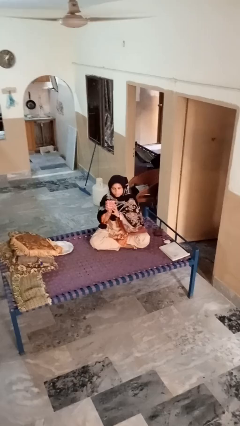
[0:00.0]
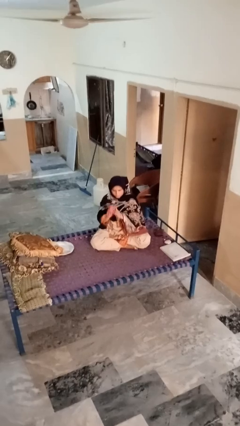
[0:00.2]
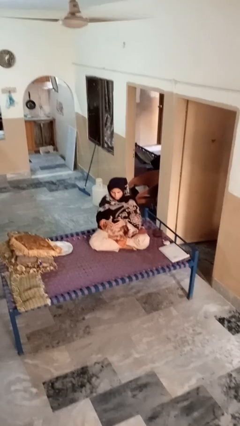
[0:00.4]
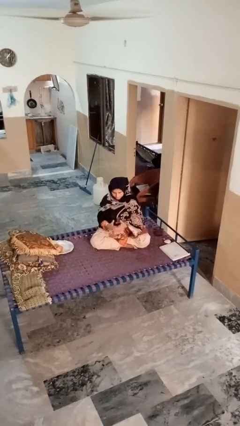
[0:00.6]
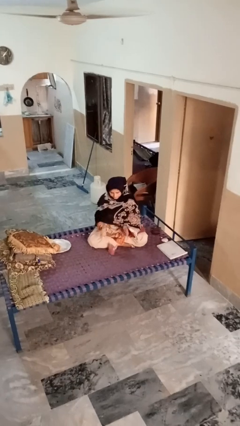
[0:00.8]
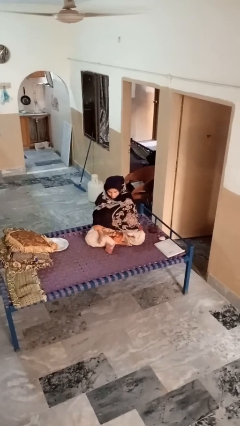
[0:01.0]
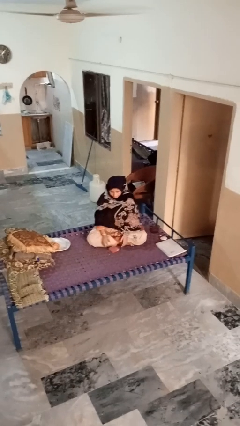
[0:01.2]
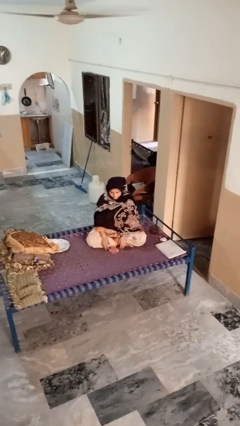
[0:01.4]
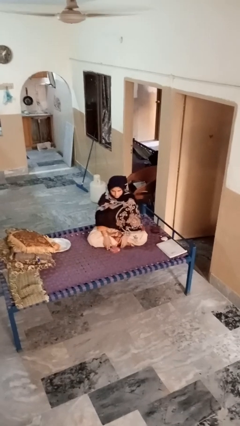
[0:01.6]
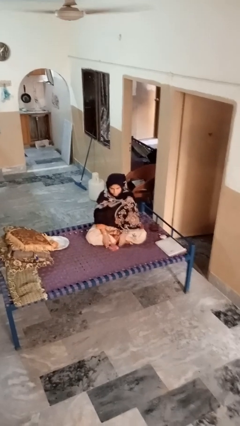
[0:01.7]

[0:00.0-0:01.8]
person catches dropped object

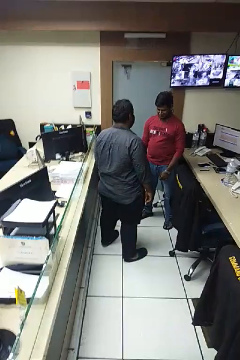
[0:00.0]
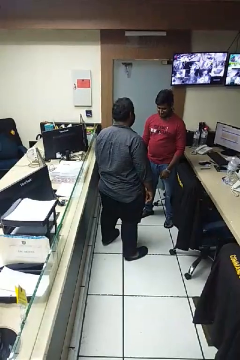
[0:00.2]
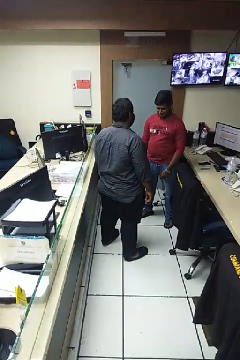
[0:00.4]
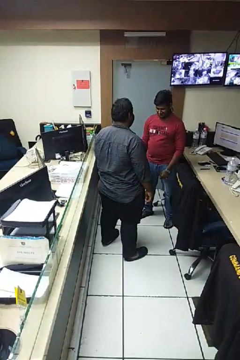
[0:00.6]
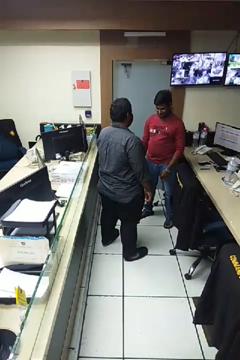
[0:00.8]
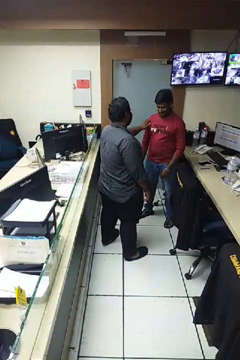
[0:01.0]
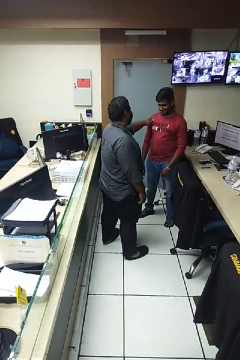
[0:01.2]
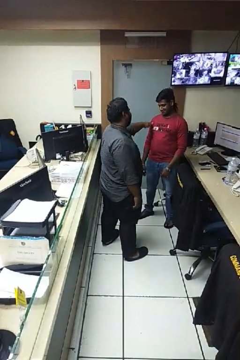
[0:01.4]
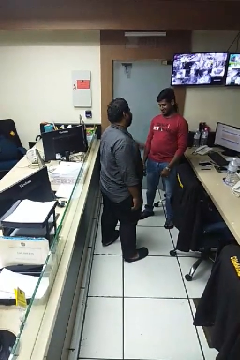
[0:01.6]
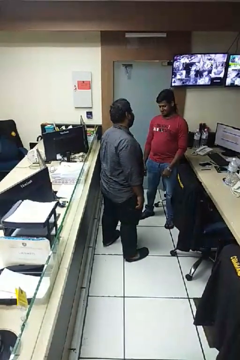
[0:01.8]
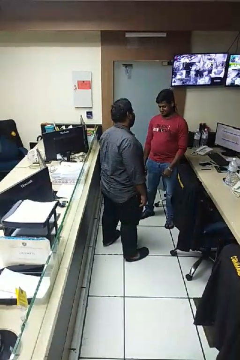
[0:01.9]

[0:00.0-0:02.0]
person shoves person

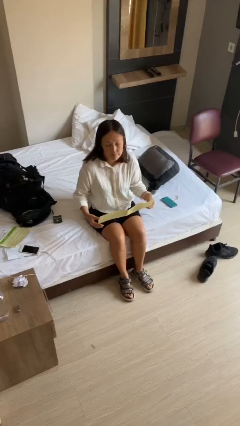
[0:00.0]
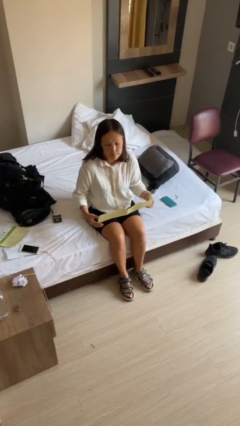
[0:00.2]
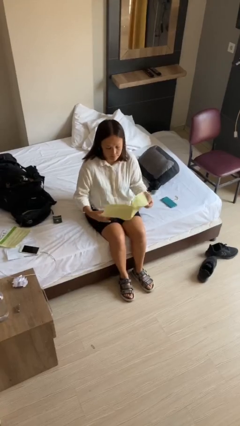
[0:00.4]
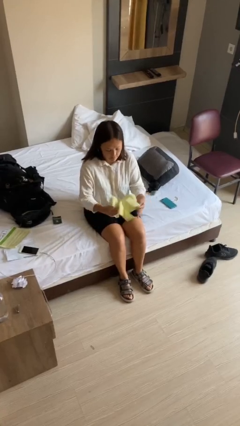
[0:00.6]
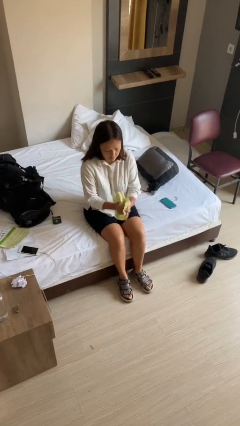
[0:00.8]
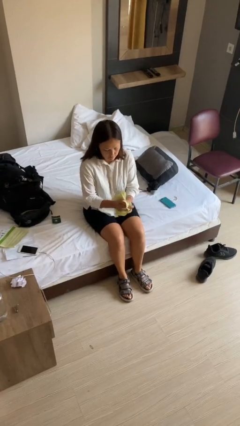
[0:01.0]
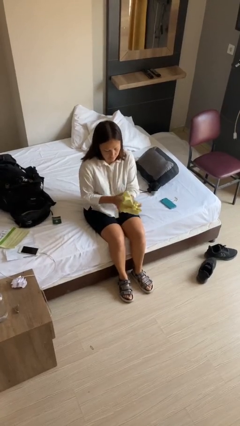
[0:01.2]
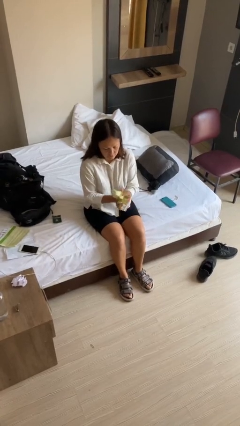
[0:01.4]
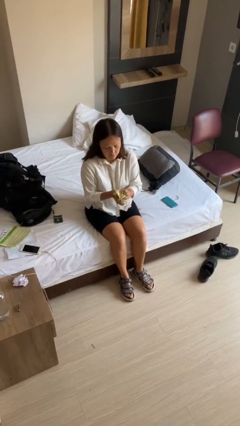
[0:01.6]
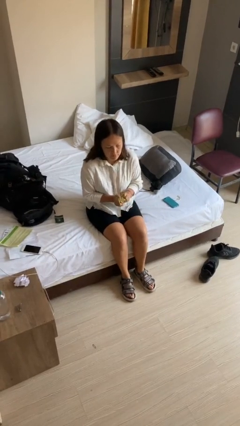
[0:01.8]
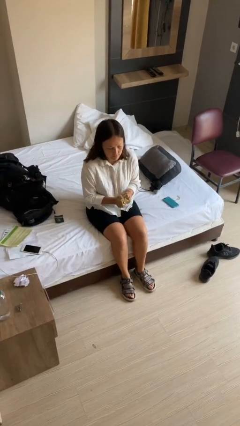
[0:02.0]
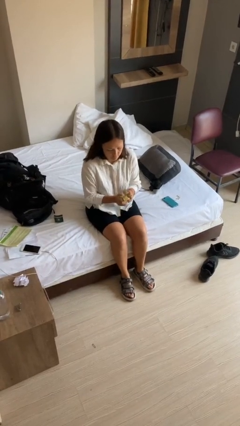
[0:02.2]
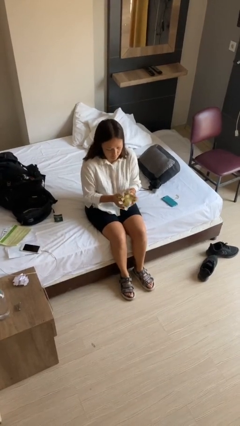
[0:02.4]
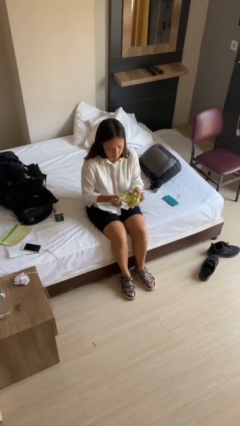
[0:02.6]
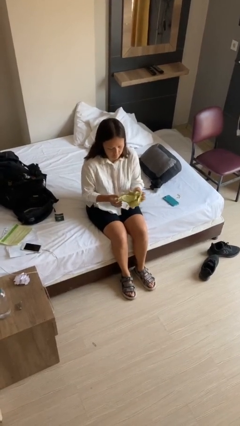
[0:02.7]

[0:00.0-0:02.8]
person crumples paper

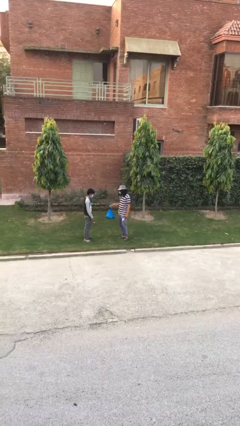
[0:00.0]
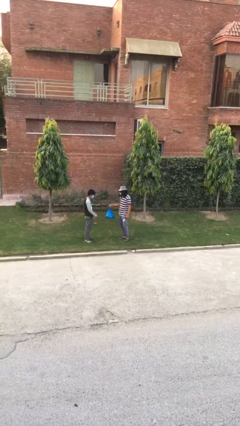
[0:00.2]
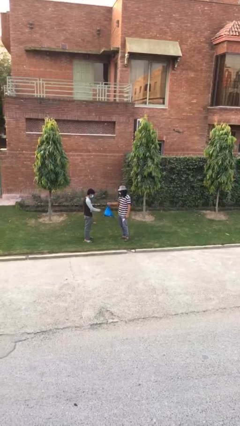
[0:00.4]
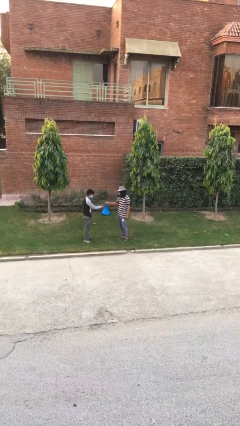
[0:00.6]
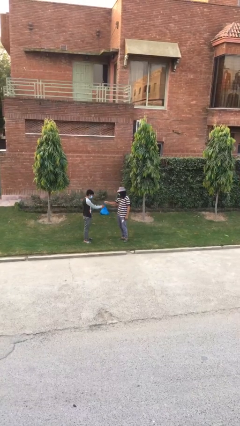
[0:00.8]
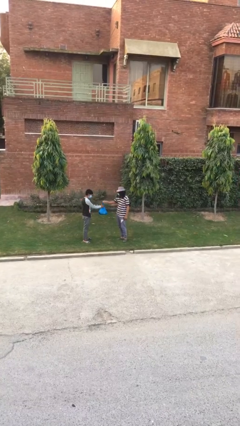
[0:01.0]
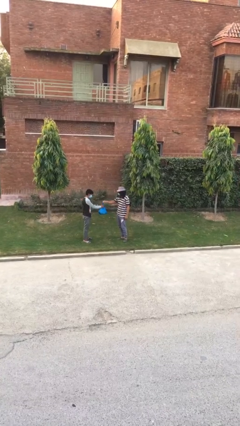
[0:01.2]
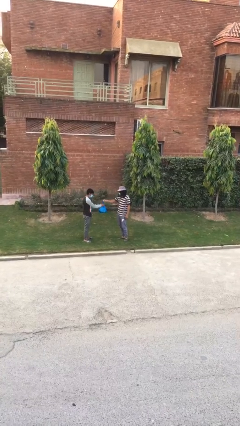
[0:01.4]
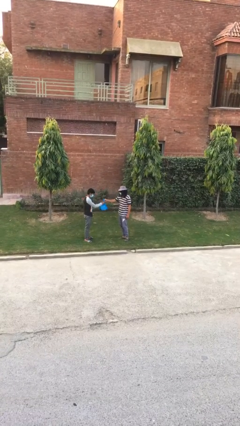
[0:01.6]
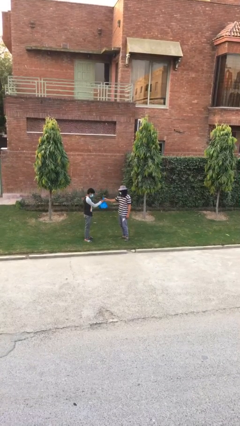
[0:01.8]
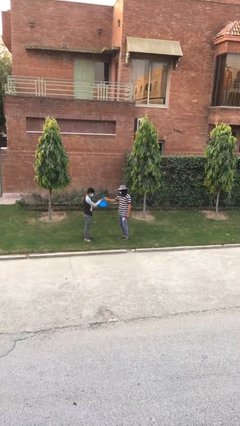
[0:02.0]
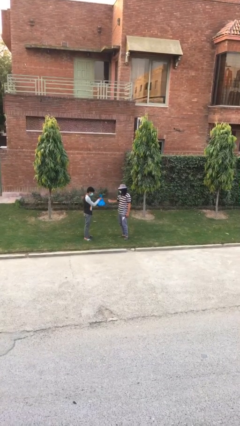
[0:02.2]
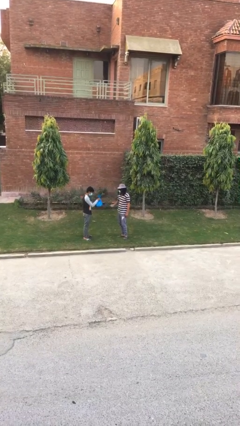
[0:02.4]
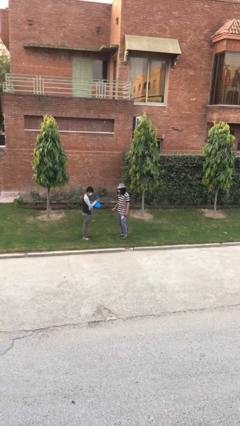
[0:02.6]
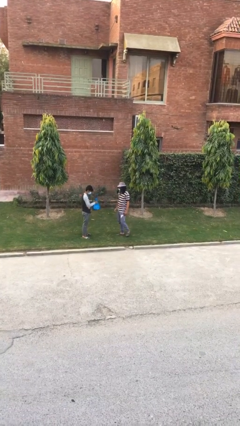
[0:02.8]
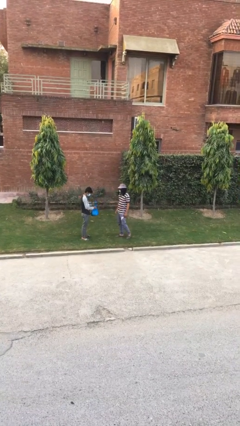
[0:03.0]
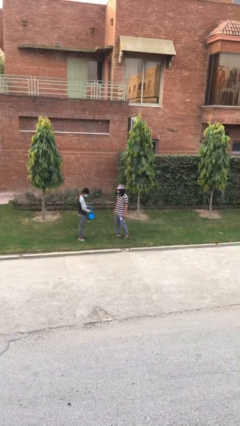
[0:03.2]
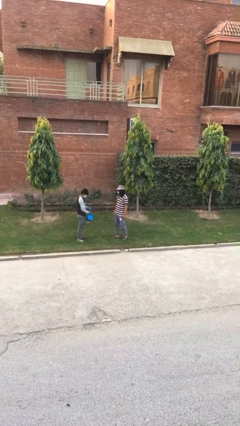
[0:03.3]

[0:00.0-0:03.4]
person transfers object to person

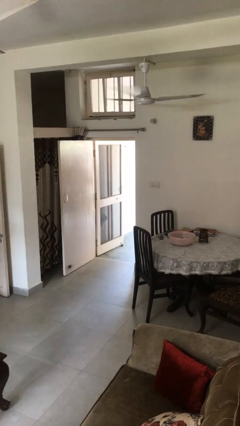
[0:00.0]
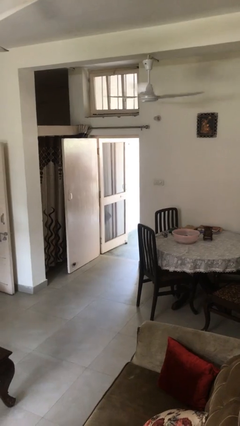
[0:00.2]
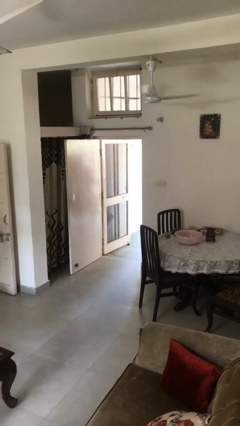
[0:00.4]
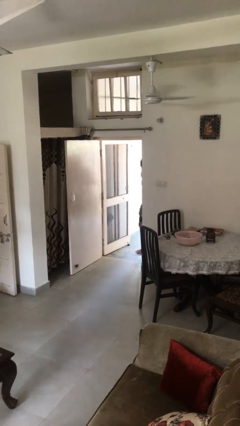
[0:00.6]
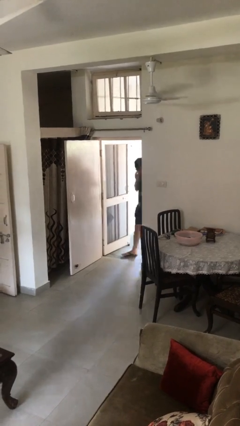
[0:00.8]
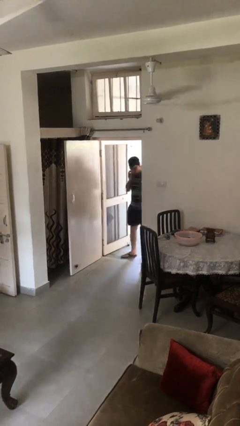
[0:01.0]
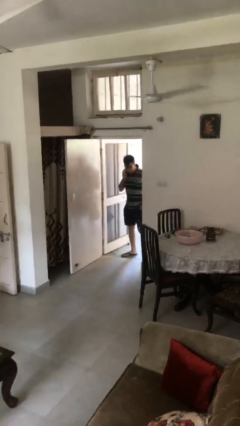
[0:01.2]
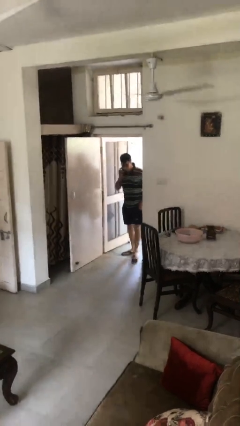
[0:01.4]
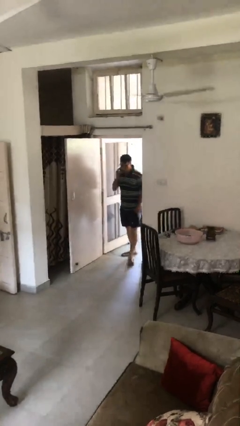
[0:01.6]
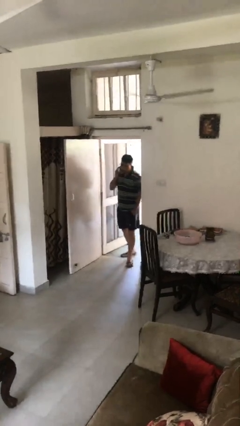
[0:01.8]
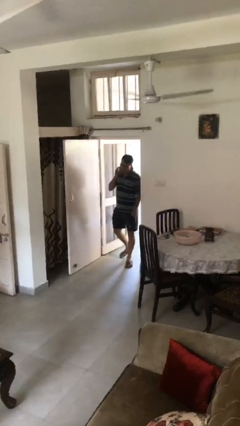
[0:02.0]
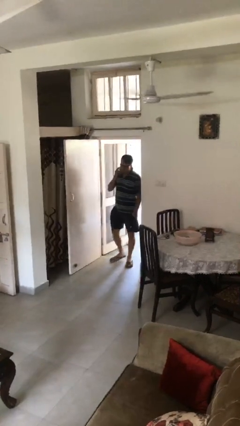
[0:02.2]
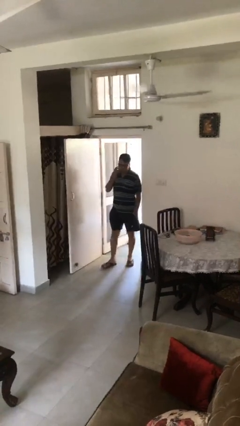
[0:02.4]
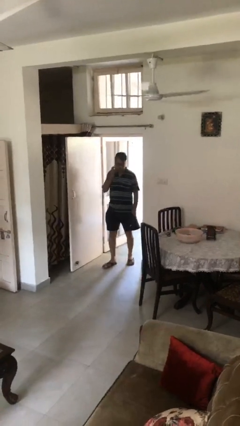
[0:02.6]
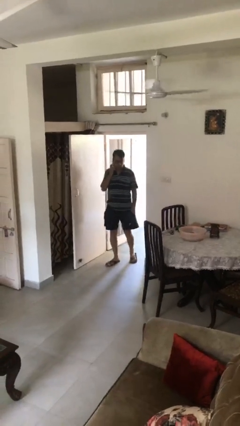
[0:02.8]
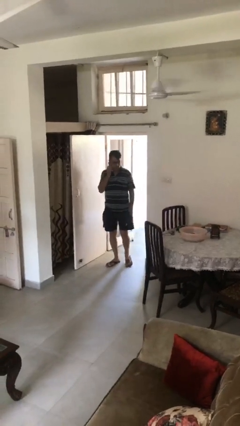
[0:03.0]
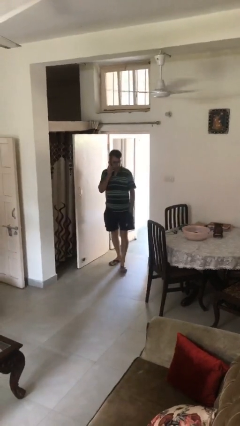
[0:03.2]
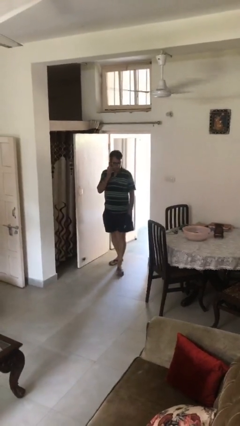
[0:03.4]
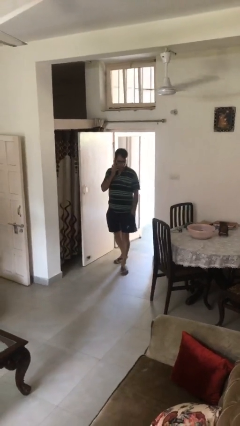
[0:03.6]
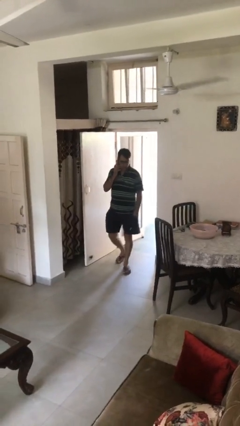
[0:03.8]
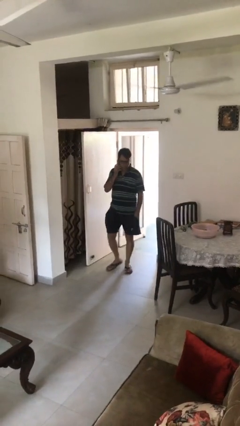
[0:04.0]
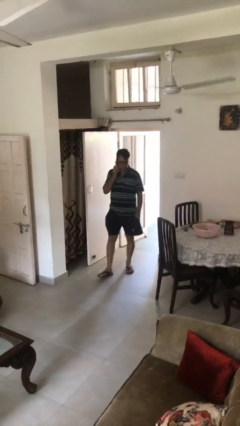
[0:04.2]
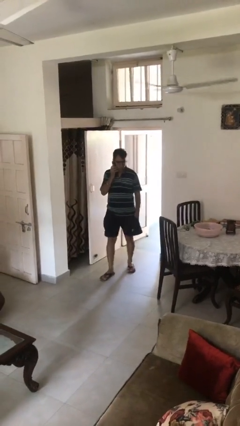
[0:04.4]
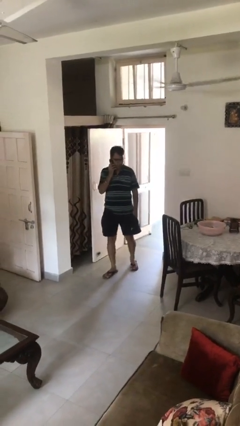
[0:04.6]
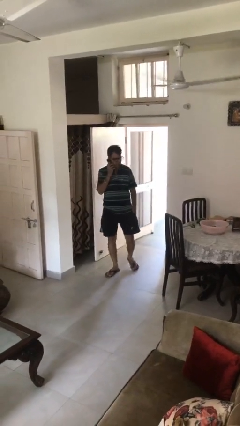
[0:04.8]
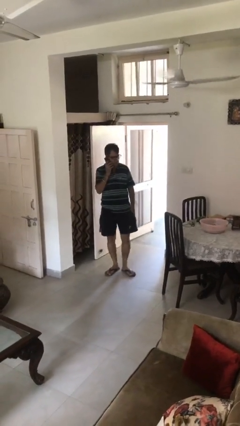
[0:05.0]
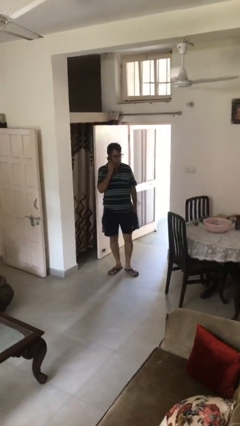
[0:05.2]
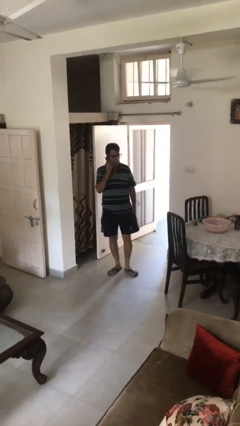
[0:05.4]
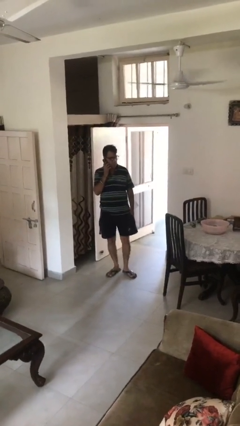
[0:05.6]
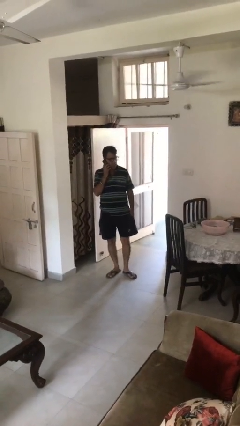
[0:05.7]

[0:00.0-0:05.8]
person enters scene through structure

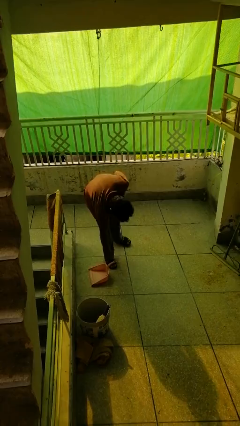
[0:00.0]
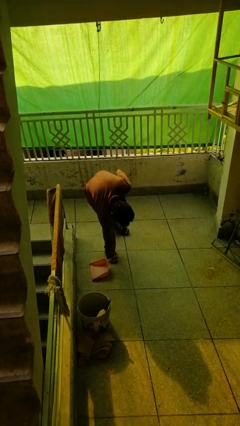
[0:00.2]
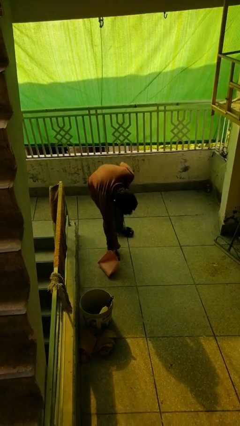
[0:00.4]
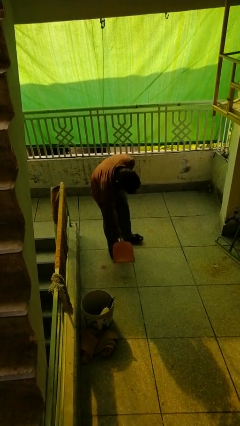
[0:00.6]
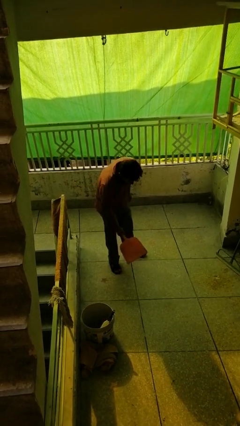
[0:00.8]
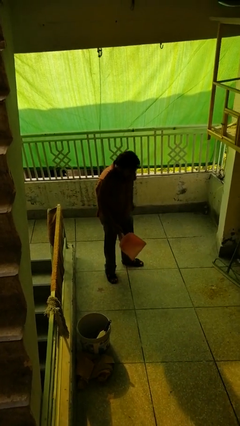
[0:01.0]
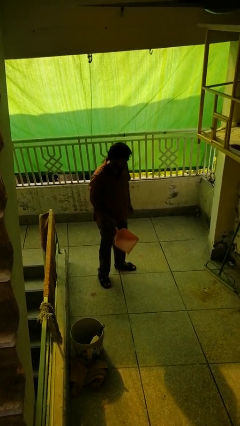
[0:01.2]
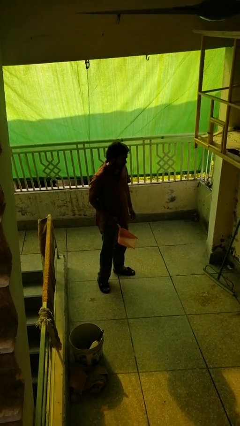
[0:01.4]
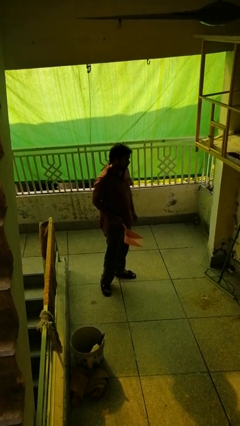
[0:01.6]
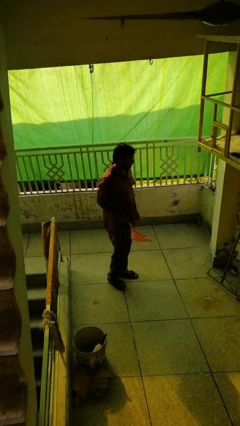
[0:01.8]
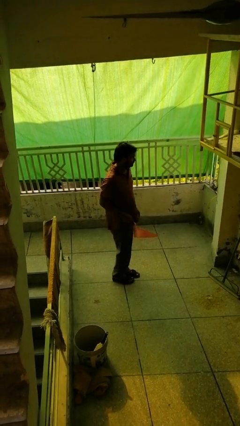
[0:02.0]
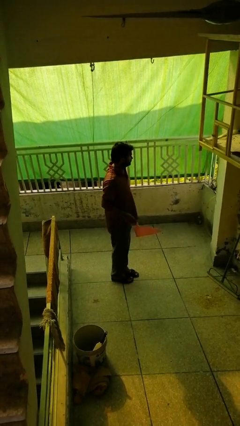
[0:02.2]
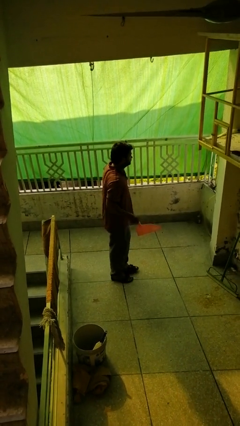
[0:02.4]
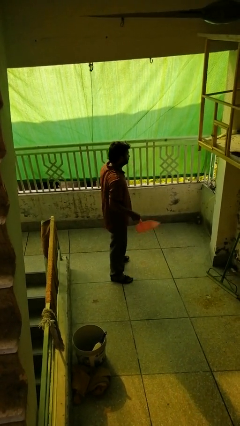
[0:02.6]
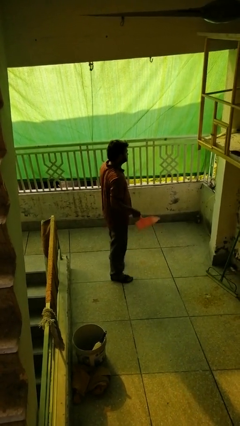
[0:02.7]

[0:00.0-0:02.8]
person picks up object from floor
